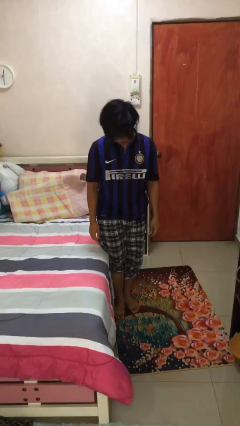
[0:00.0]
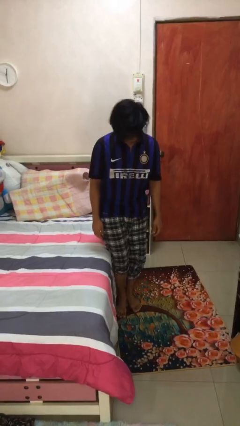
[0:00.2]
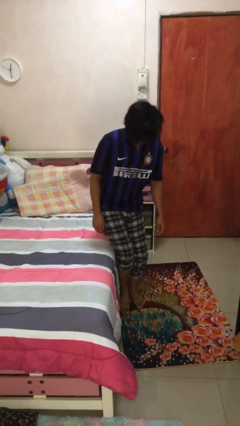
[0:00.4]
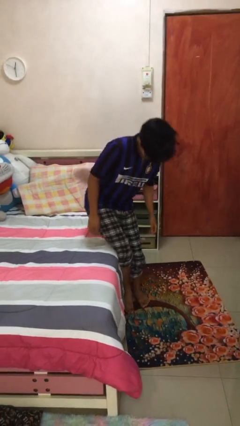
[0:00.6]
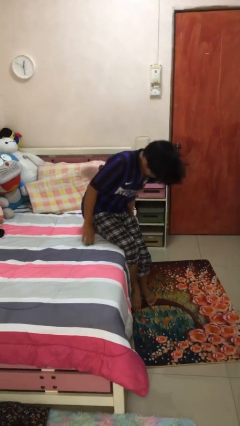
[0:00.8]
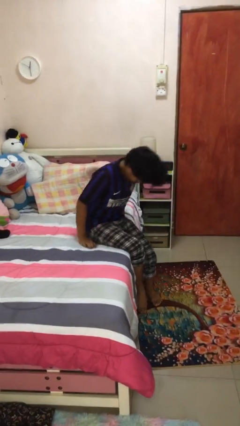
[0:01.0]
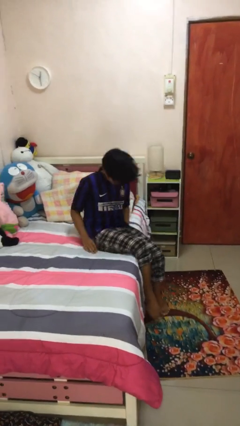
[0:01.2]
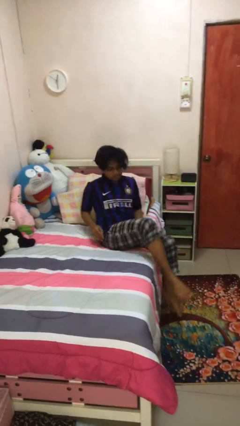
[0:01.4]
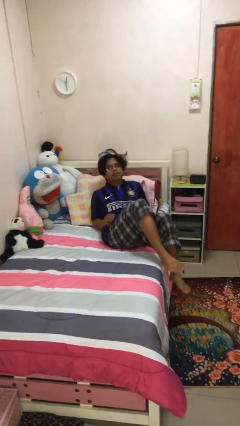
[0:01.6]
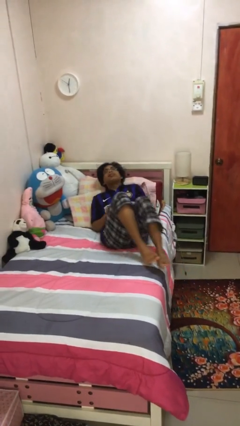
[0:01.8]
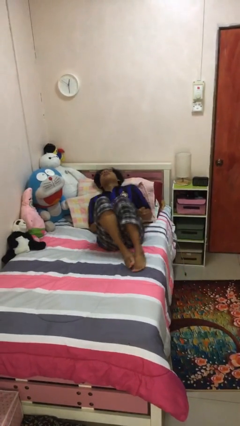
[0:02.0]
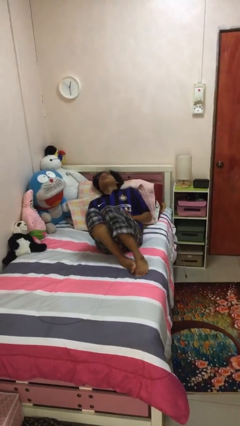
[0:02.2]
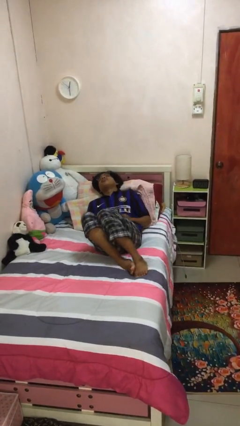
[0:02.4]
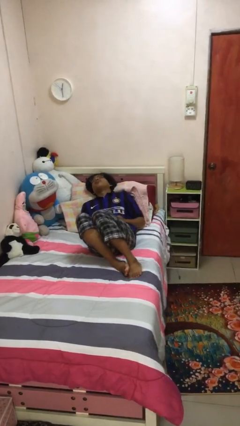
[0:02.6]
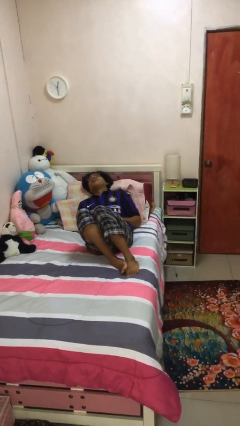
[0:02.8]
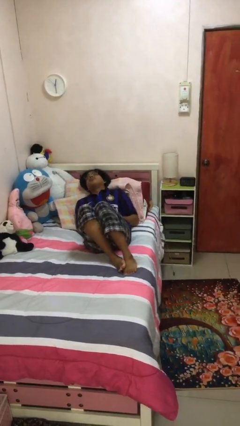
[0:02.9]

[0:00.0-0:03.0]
person lies down on bed

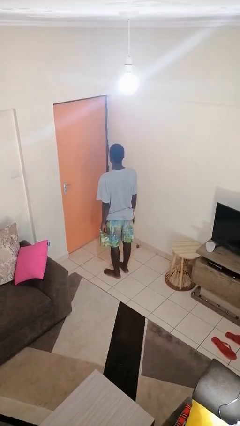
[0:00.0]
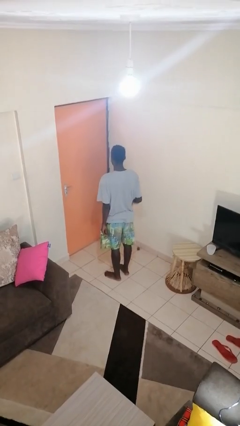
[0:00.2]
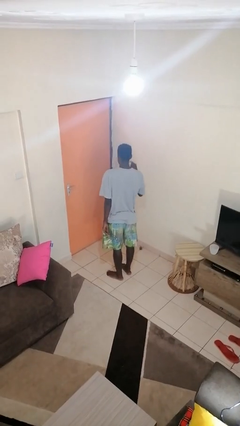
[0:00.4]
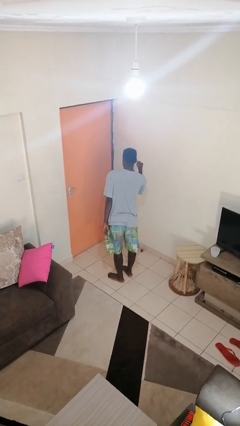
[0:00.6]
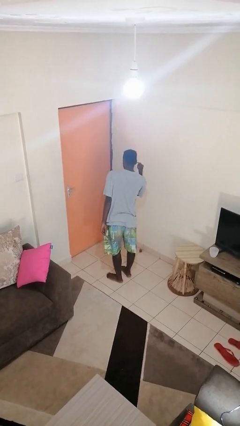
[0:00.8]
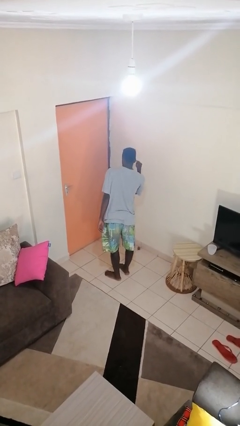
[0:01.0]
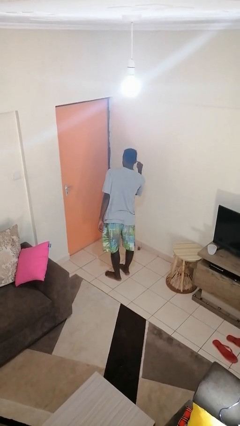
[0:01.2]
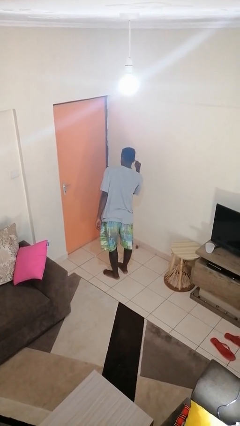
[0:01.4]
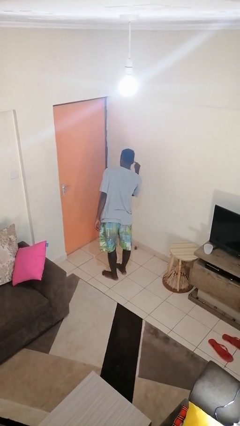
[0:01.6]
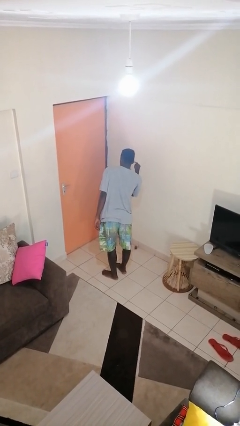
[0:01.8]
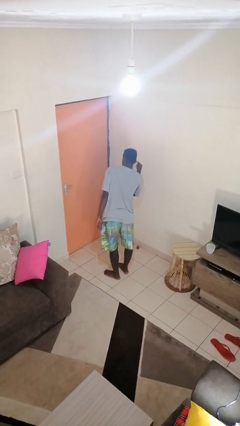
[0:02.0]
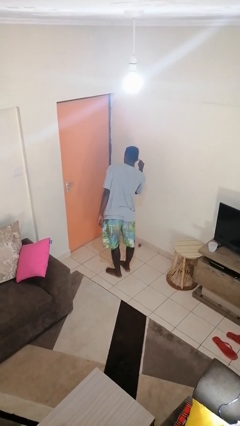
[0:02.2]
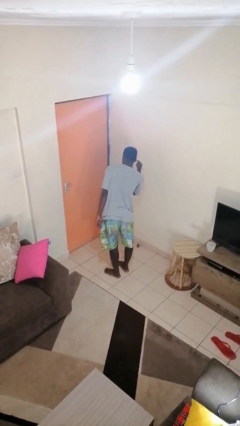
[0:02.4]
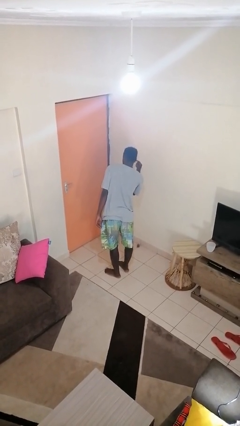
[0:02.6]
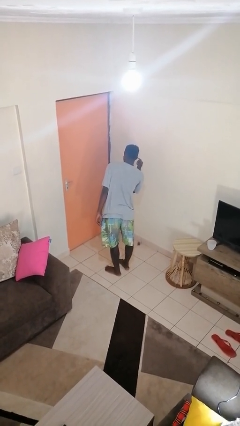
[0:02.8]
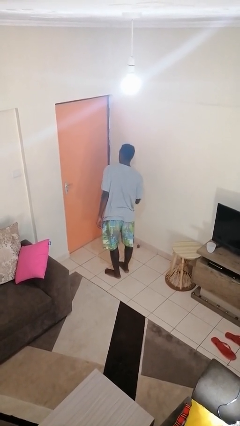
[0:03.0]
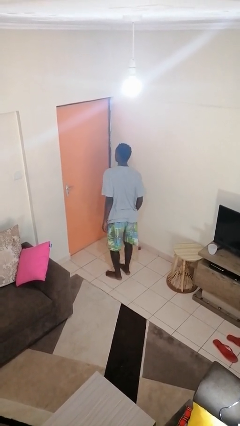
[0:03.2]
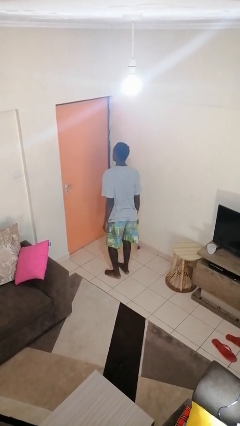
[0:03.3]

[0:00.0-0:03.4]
person gestures listen closely

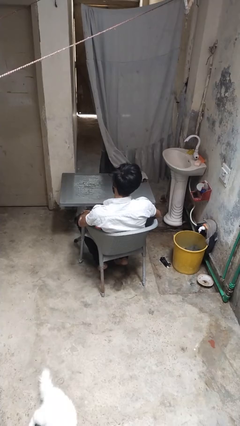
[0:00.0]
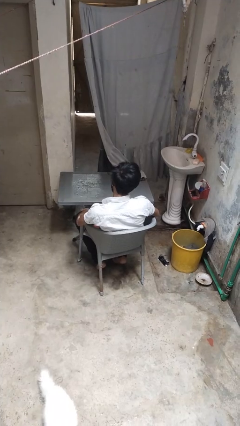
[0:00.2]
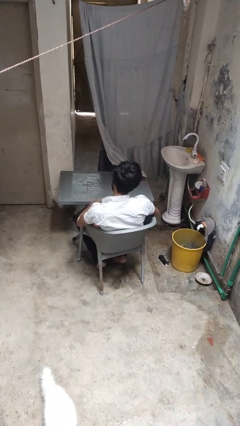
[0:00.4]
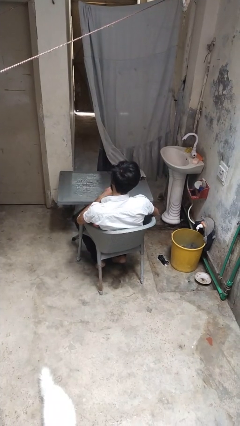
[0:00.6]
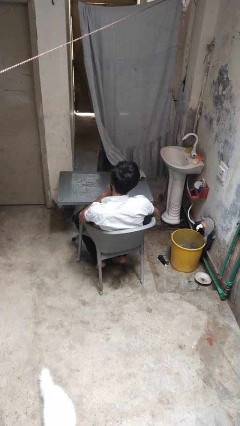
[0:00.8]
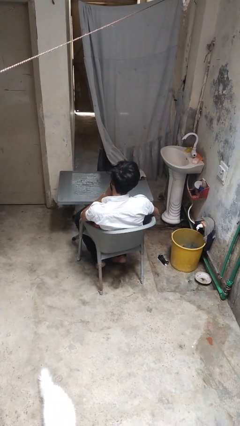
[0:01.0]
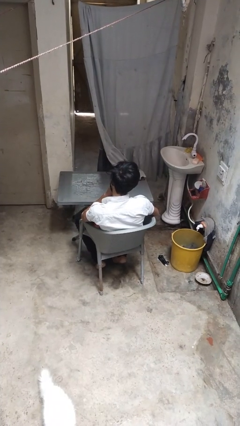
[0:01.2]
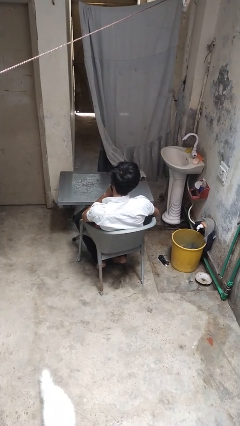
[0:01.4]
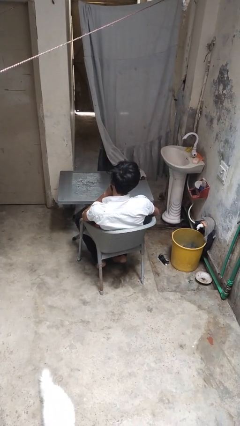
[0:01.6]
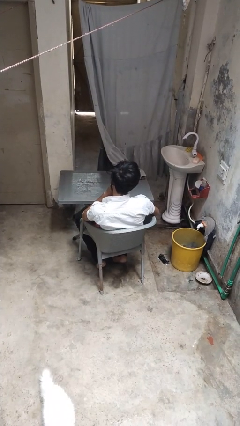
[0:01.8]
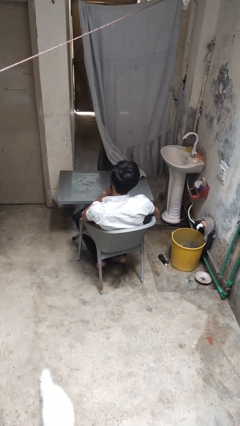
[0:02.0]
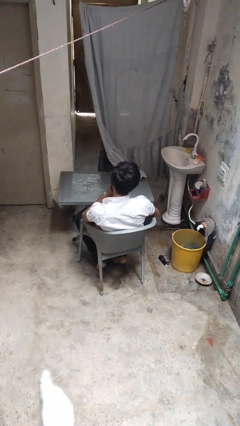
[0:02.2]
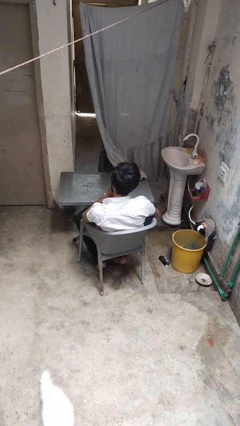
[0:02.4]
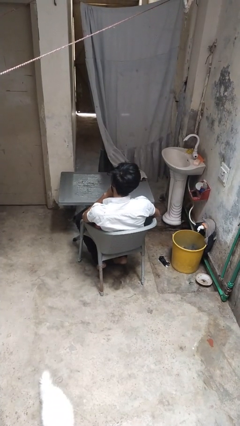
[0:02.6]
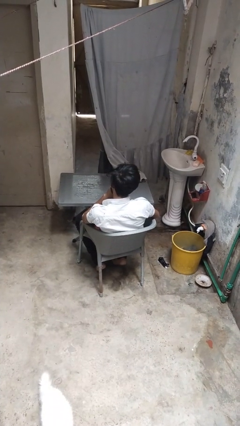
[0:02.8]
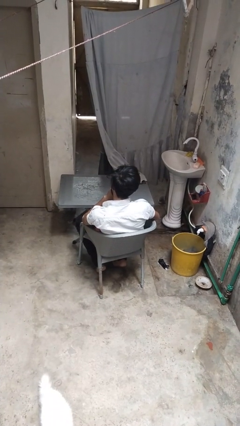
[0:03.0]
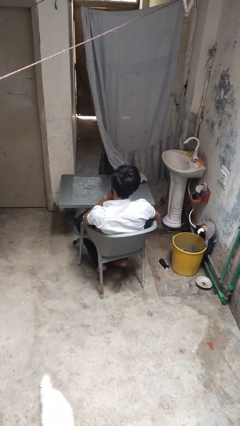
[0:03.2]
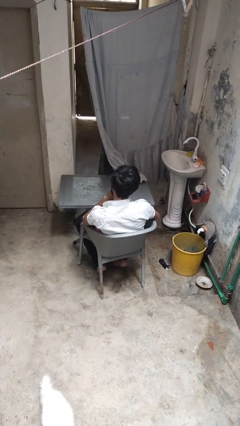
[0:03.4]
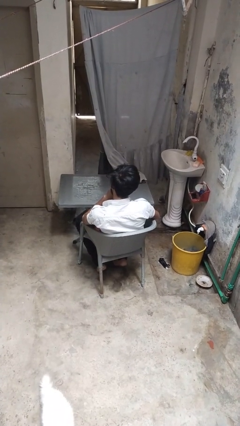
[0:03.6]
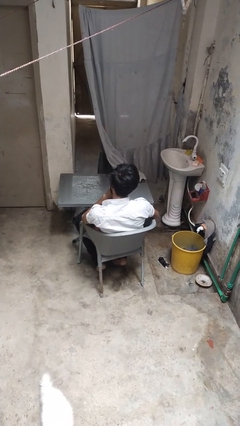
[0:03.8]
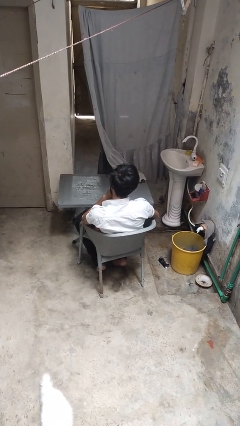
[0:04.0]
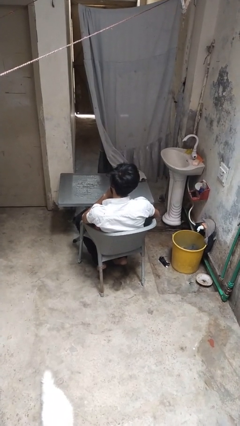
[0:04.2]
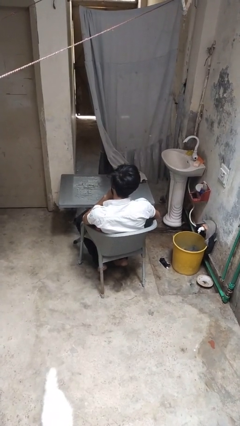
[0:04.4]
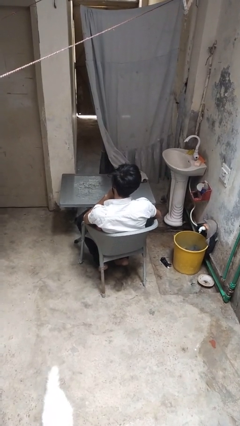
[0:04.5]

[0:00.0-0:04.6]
person licks fingers

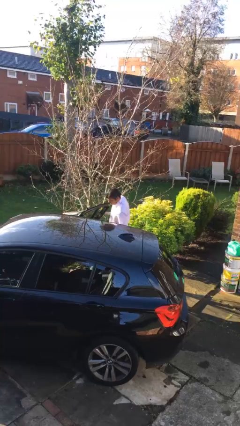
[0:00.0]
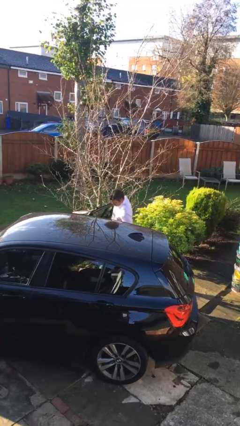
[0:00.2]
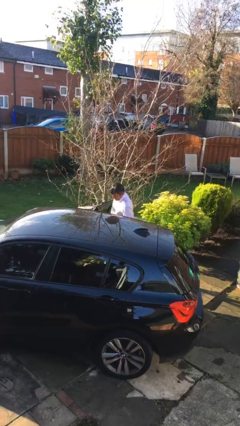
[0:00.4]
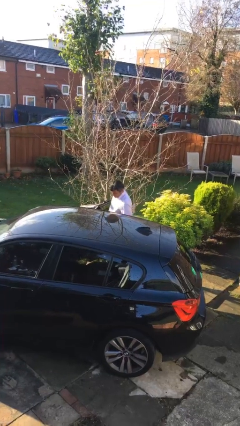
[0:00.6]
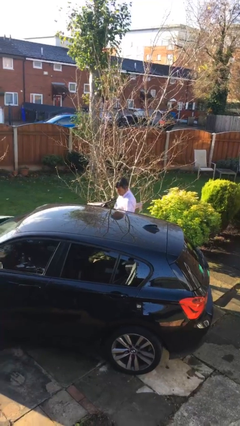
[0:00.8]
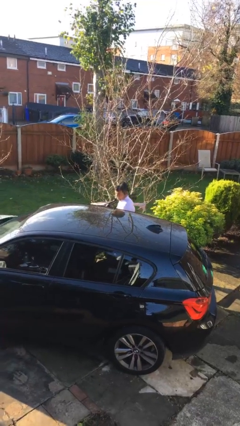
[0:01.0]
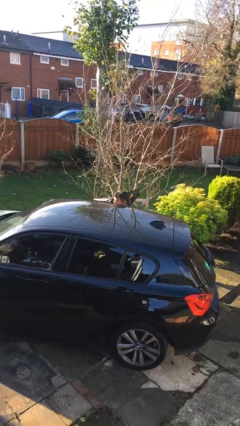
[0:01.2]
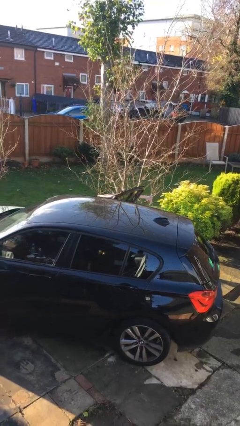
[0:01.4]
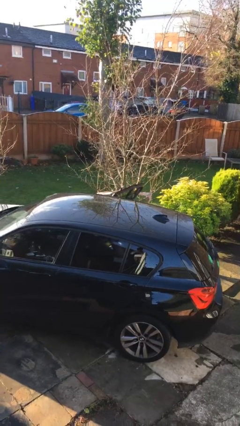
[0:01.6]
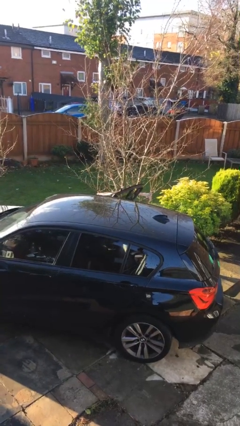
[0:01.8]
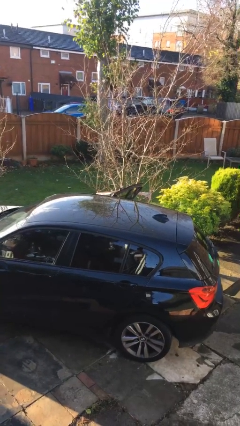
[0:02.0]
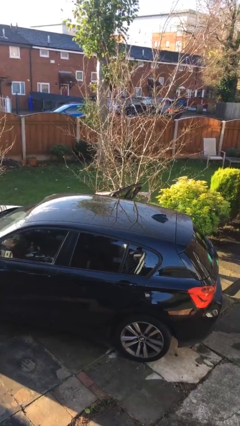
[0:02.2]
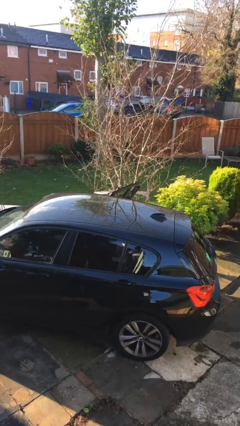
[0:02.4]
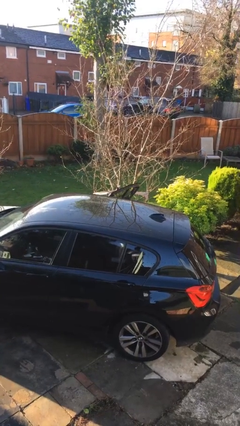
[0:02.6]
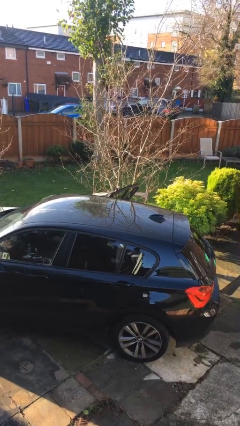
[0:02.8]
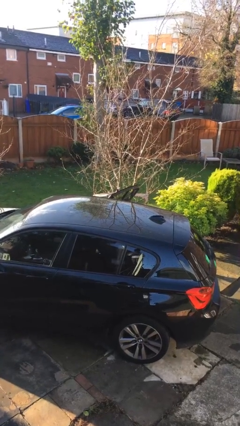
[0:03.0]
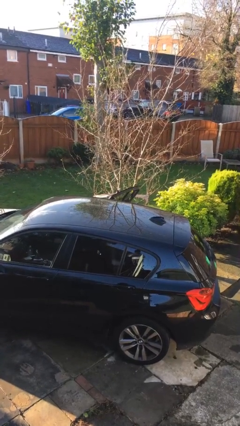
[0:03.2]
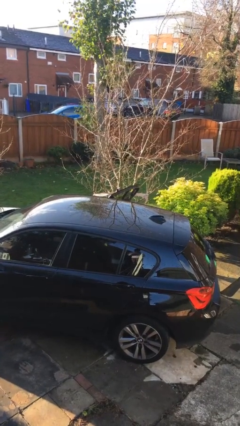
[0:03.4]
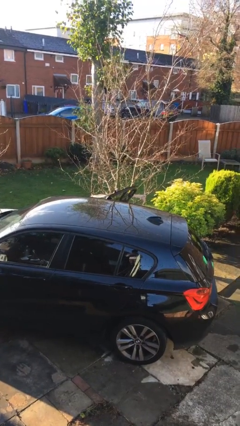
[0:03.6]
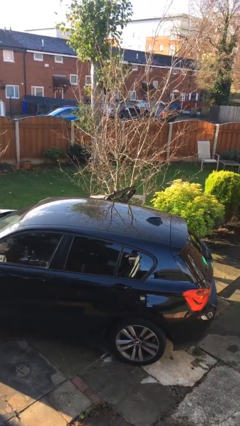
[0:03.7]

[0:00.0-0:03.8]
person enters car

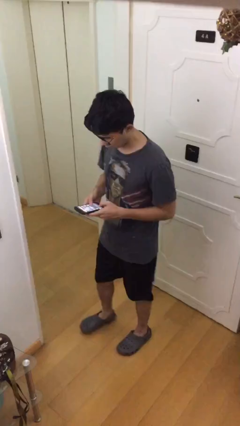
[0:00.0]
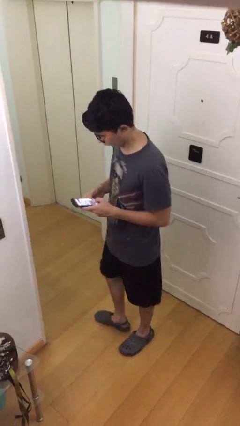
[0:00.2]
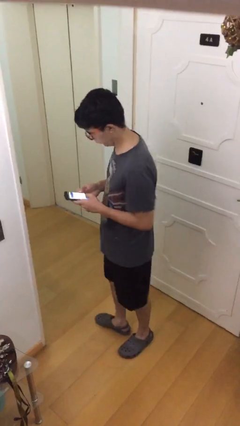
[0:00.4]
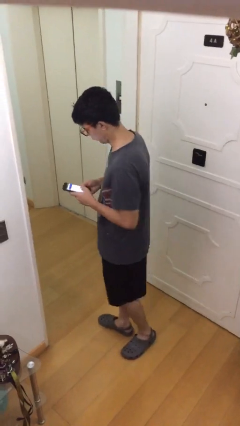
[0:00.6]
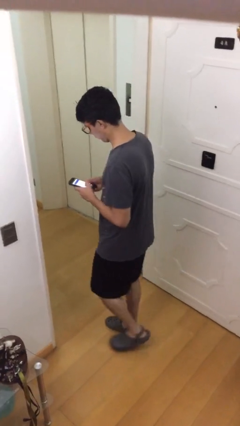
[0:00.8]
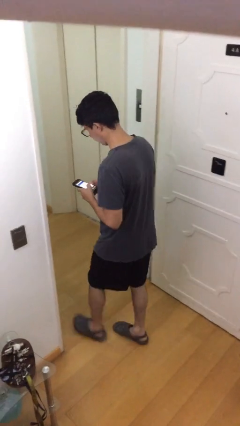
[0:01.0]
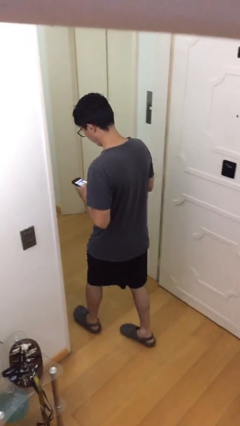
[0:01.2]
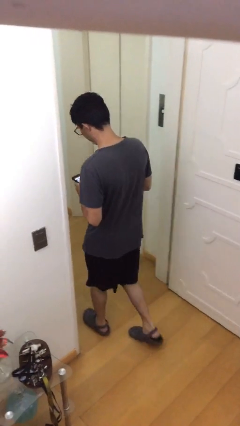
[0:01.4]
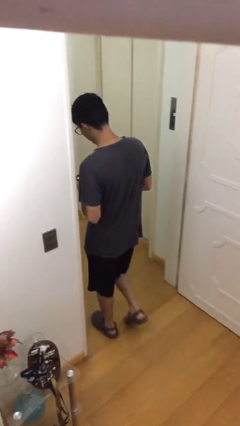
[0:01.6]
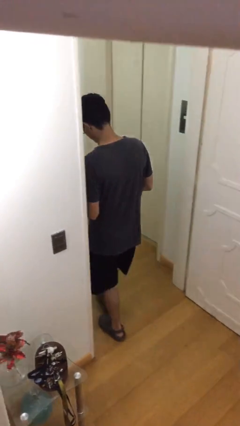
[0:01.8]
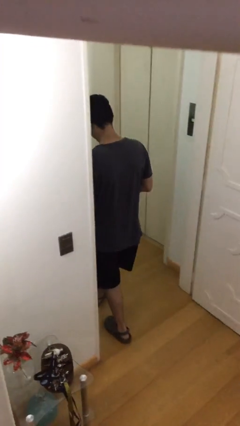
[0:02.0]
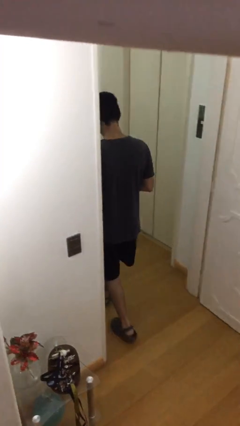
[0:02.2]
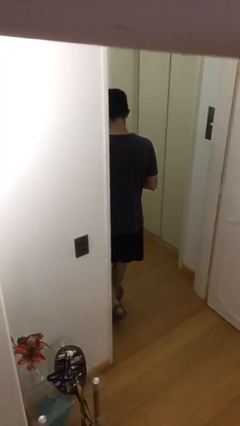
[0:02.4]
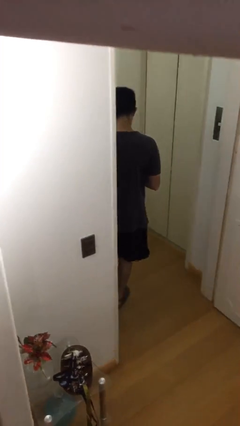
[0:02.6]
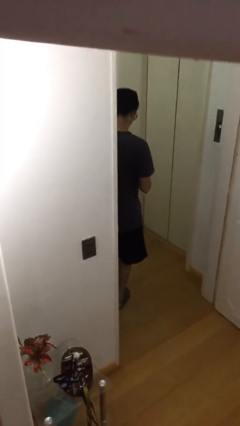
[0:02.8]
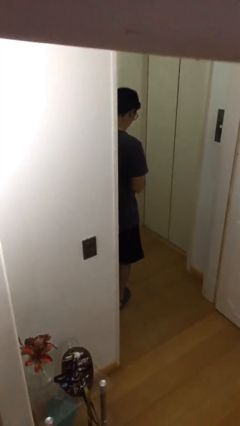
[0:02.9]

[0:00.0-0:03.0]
person exits scene through structure
